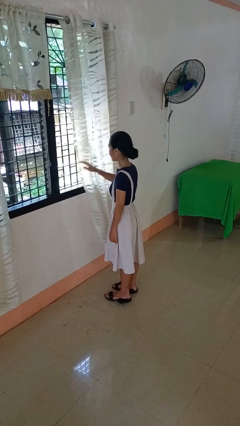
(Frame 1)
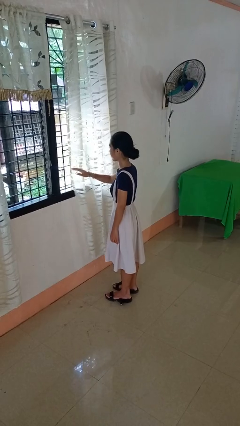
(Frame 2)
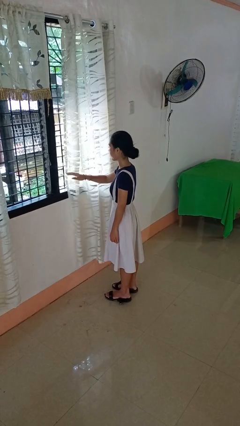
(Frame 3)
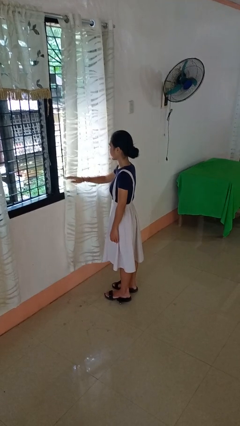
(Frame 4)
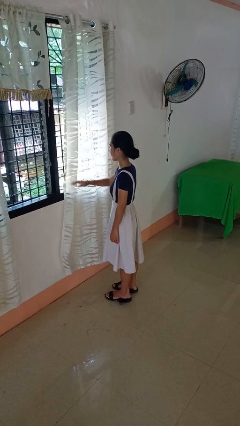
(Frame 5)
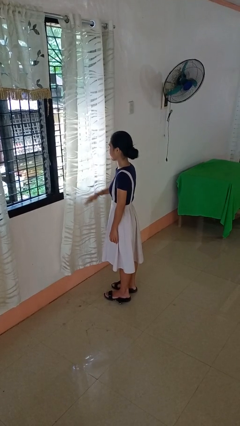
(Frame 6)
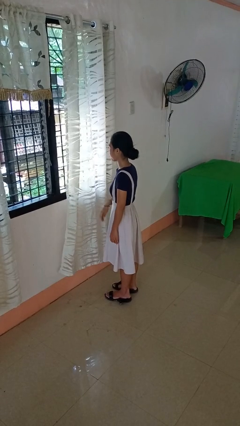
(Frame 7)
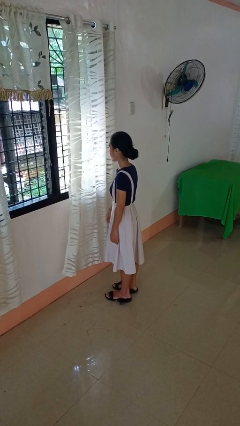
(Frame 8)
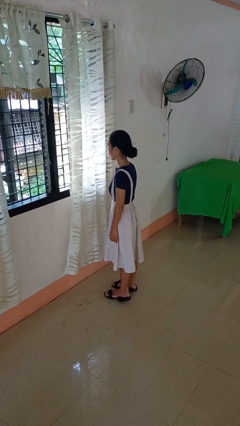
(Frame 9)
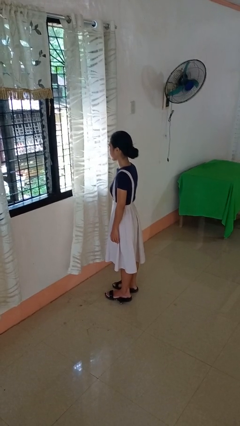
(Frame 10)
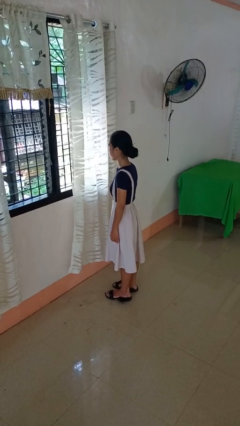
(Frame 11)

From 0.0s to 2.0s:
person closes curtains

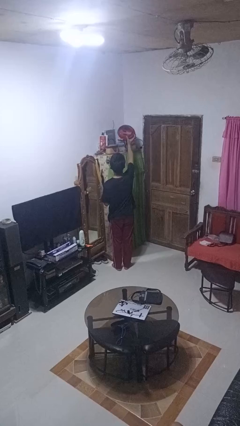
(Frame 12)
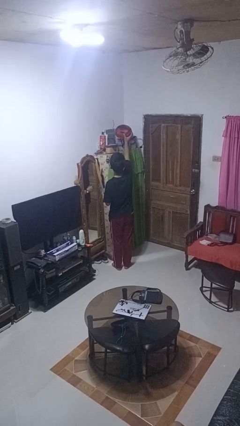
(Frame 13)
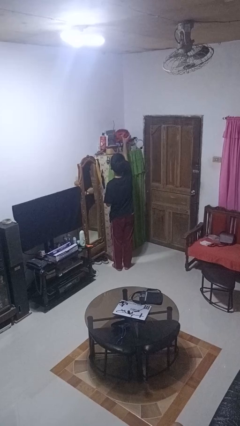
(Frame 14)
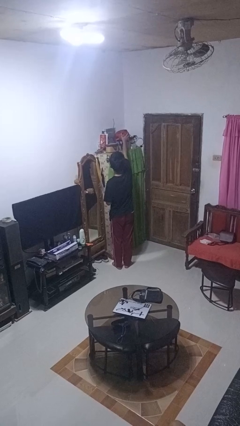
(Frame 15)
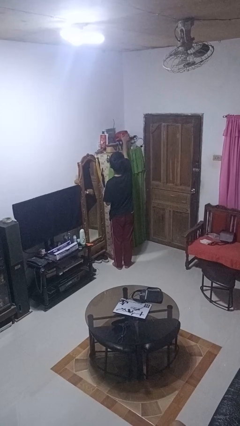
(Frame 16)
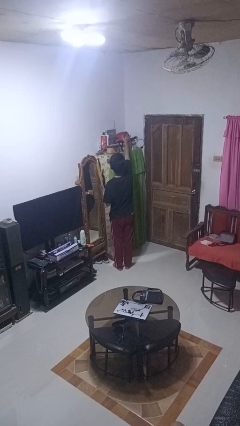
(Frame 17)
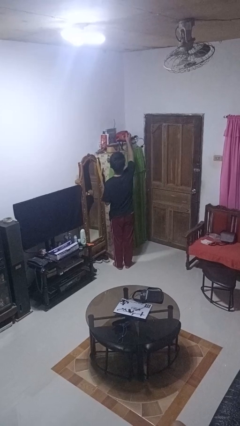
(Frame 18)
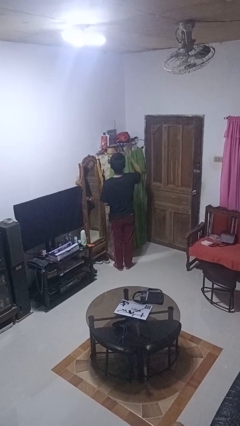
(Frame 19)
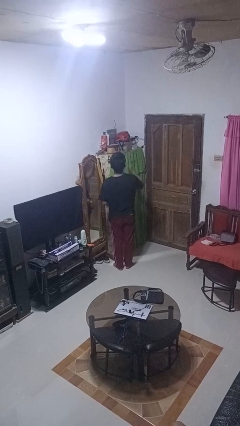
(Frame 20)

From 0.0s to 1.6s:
person puts down object on shelf

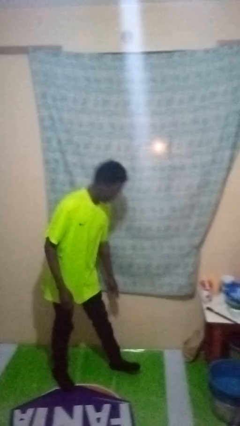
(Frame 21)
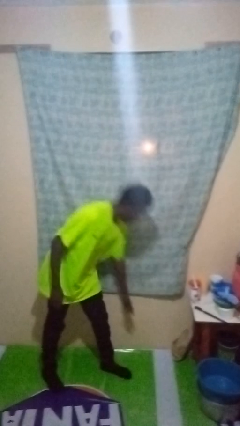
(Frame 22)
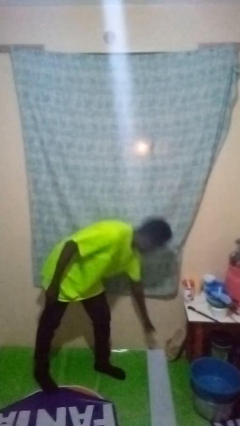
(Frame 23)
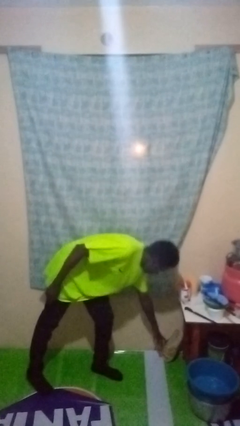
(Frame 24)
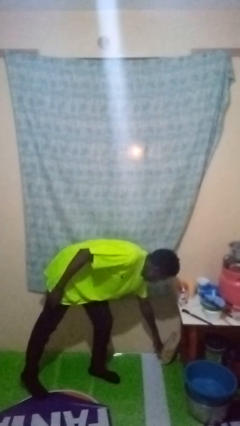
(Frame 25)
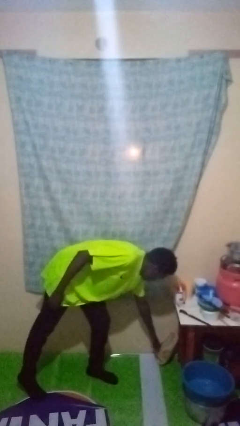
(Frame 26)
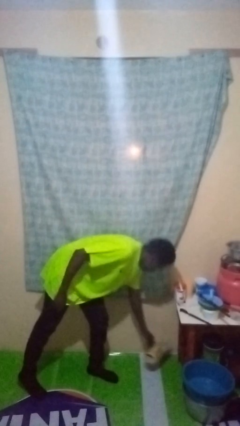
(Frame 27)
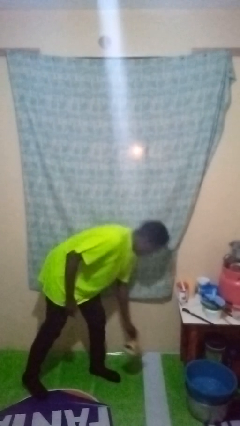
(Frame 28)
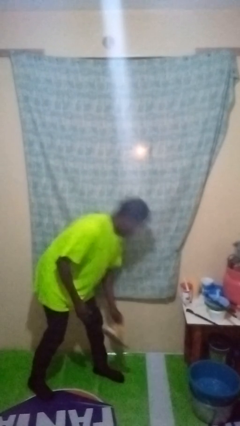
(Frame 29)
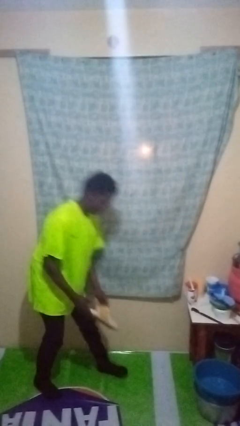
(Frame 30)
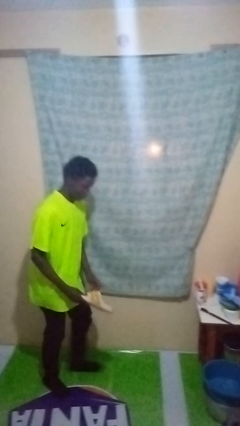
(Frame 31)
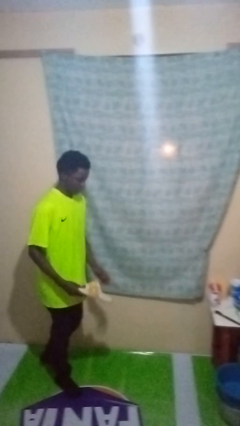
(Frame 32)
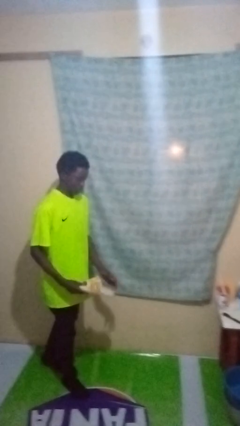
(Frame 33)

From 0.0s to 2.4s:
person picks up object from floor

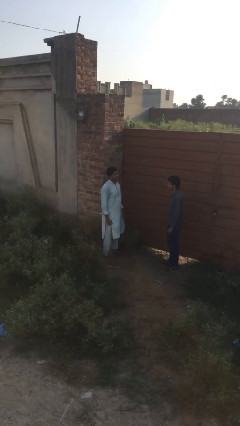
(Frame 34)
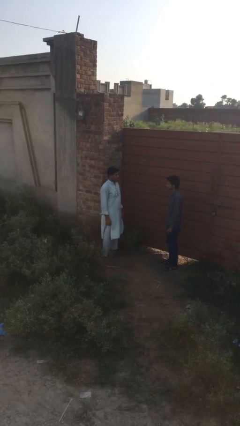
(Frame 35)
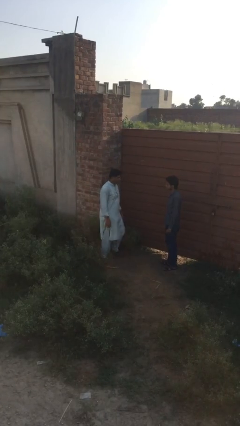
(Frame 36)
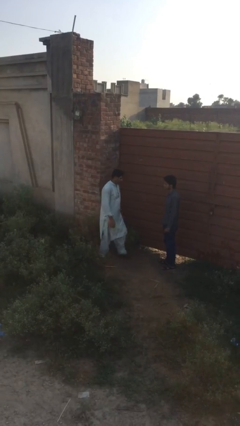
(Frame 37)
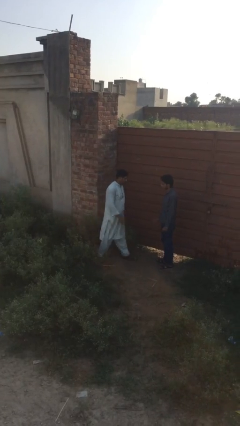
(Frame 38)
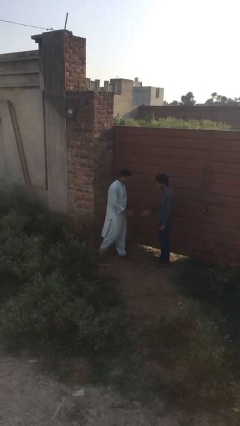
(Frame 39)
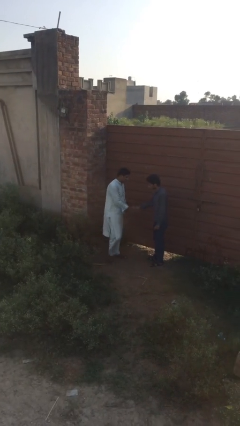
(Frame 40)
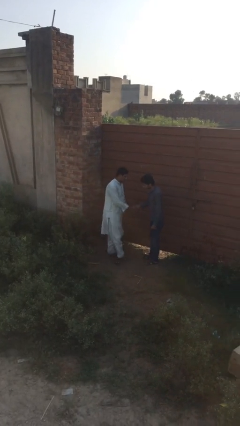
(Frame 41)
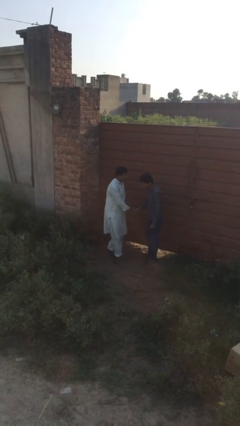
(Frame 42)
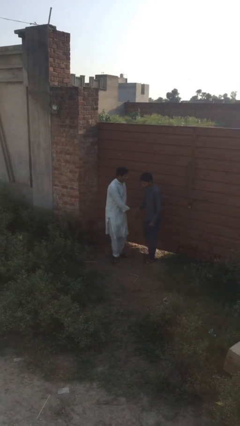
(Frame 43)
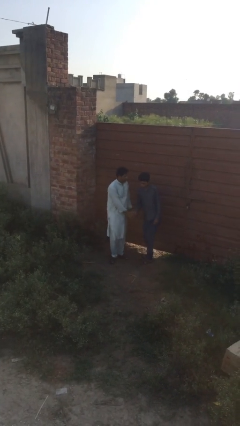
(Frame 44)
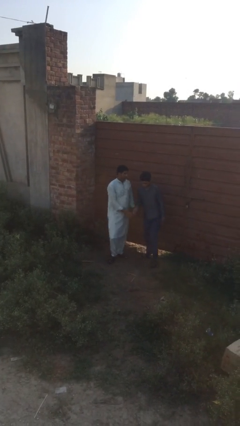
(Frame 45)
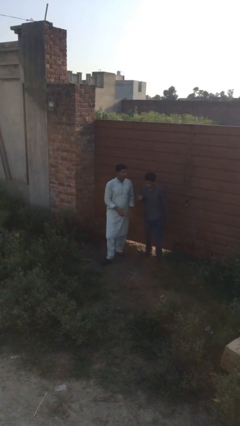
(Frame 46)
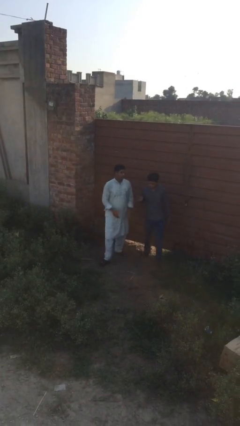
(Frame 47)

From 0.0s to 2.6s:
person shakes hand

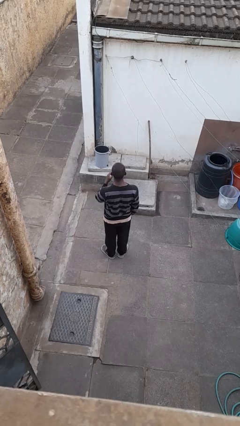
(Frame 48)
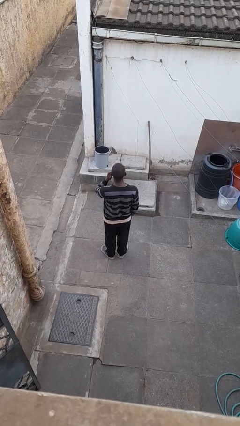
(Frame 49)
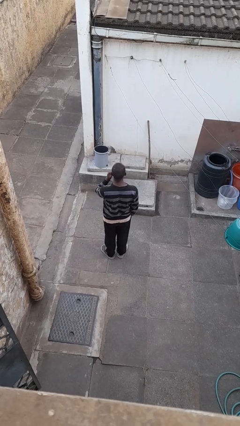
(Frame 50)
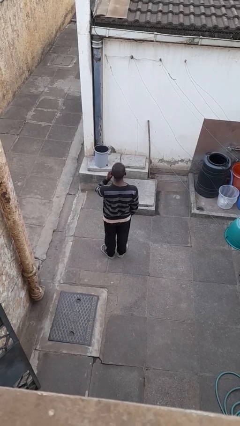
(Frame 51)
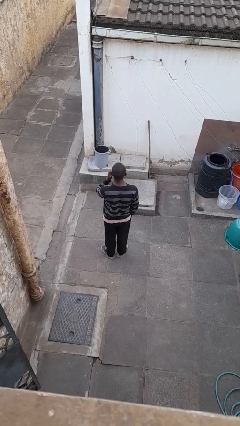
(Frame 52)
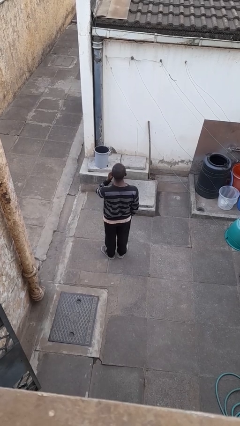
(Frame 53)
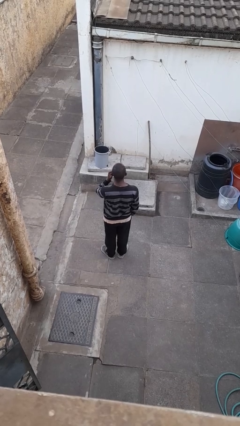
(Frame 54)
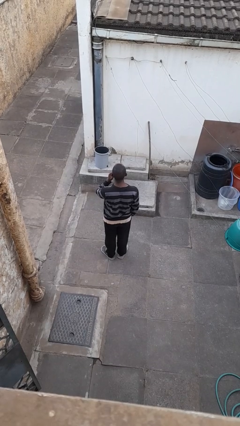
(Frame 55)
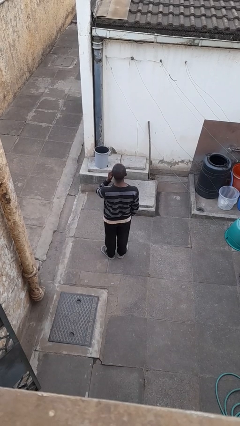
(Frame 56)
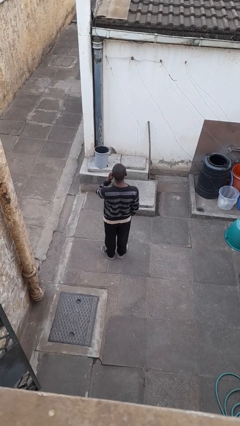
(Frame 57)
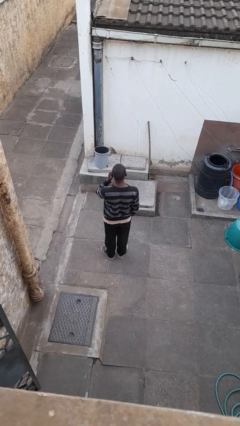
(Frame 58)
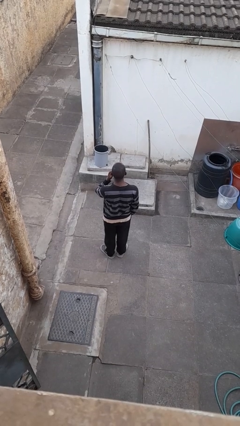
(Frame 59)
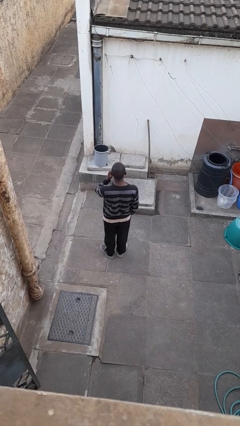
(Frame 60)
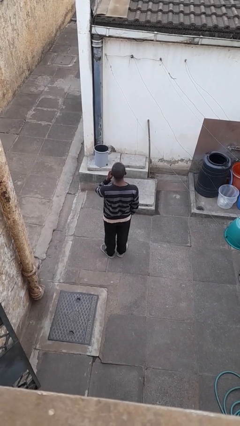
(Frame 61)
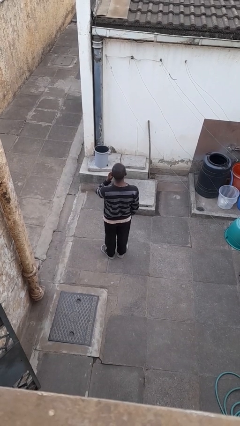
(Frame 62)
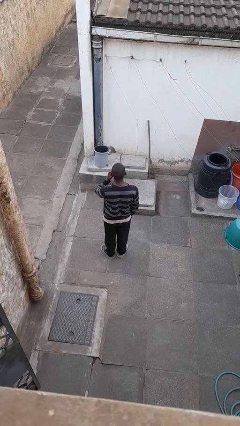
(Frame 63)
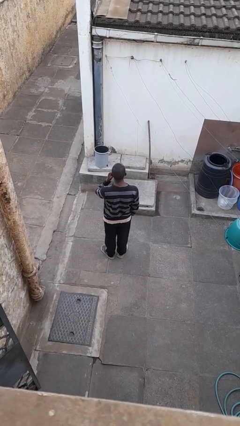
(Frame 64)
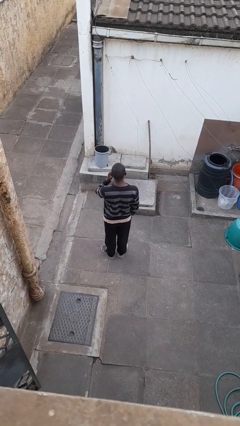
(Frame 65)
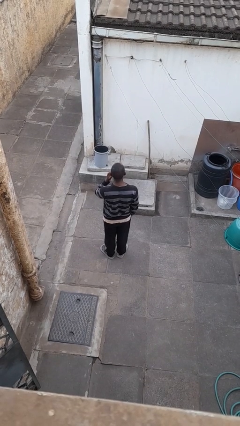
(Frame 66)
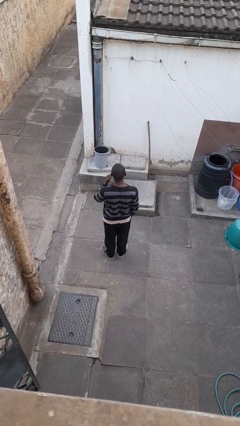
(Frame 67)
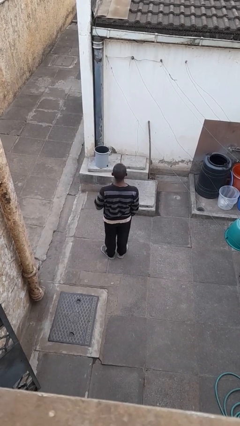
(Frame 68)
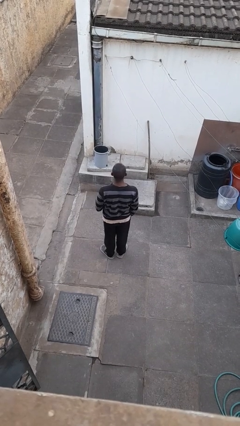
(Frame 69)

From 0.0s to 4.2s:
person scratches face

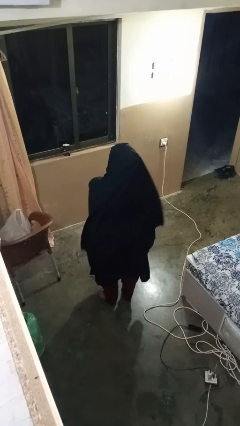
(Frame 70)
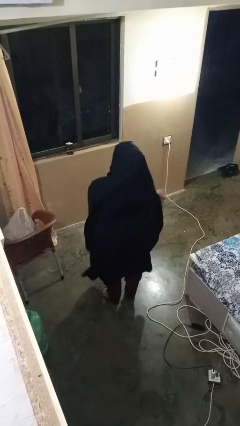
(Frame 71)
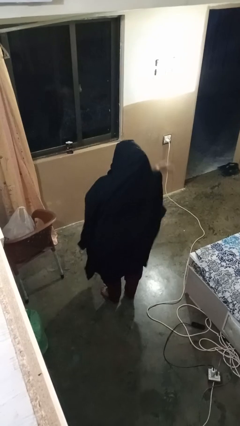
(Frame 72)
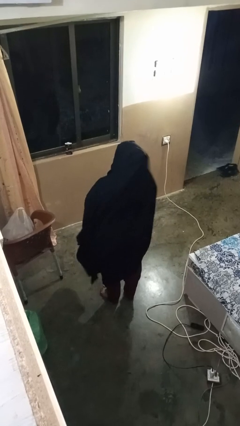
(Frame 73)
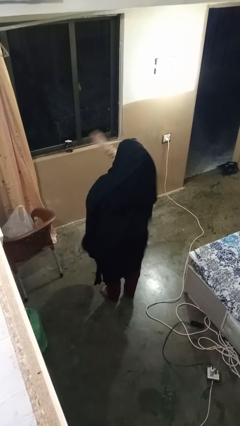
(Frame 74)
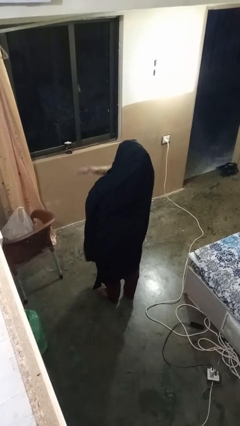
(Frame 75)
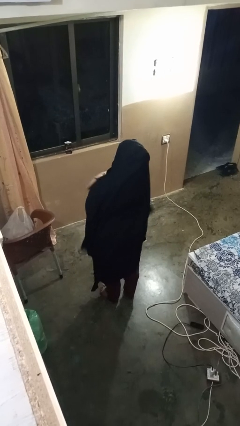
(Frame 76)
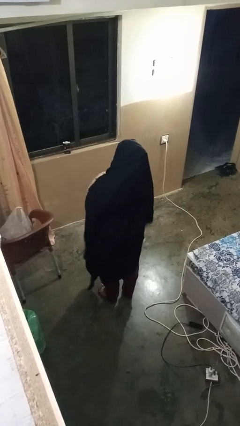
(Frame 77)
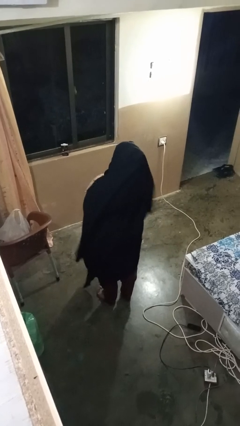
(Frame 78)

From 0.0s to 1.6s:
person gestures swipe left

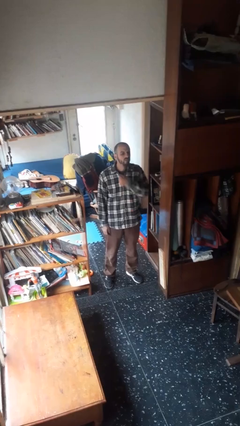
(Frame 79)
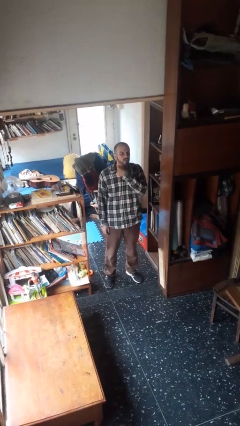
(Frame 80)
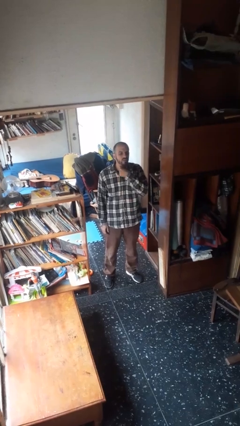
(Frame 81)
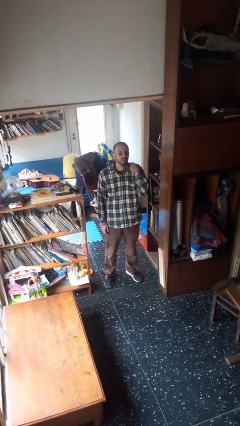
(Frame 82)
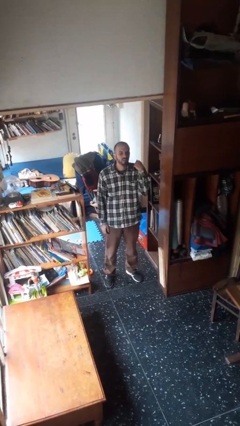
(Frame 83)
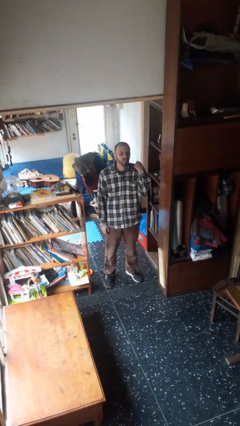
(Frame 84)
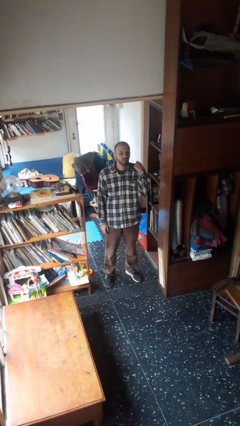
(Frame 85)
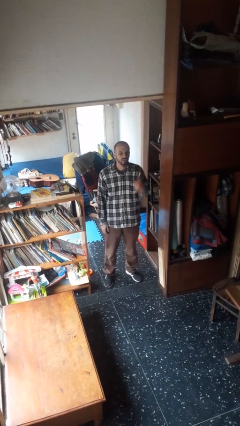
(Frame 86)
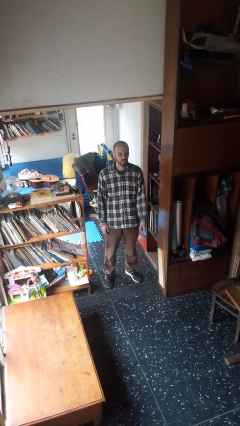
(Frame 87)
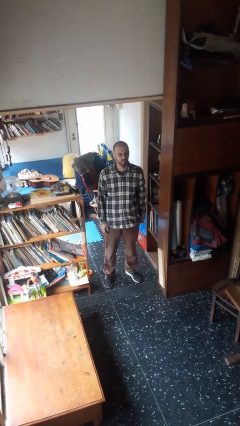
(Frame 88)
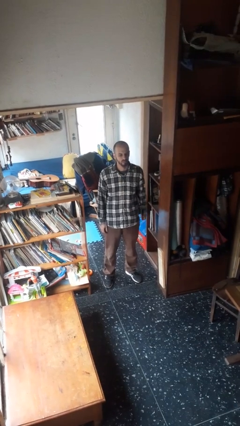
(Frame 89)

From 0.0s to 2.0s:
person gestures cut

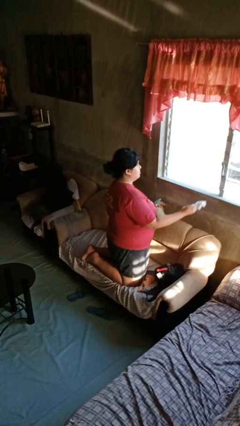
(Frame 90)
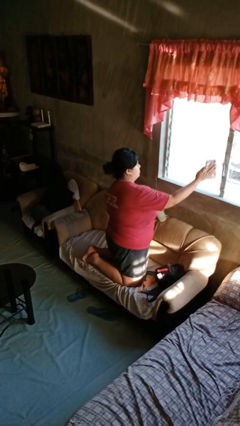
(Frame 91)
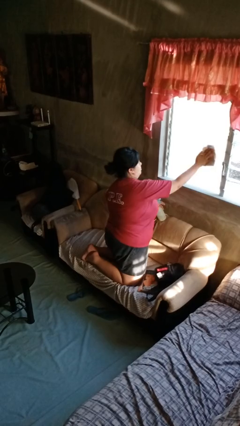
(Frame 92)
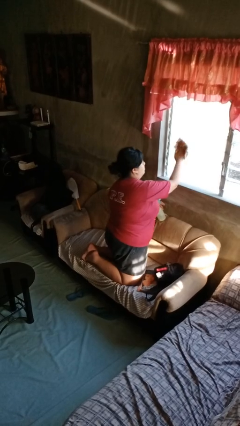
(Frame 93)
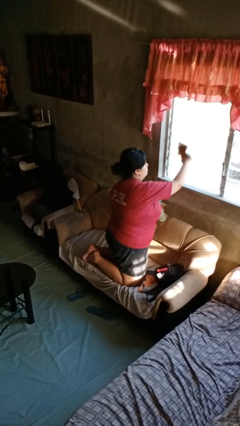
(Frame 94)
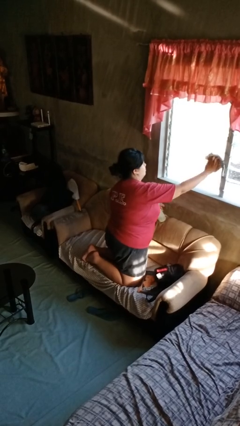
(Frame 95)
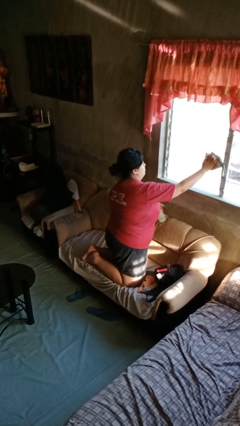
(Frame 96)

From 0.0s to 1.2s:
person washes window
